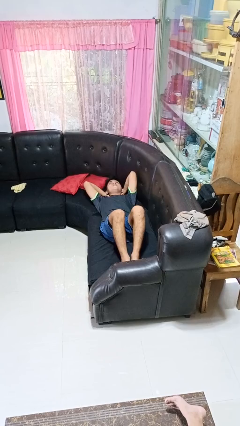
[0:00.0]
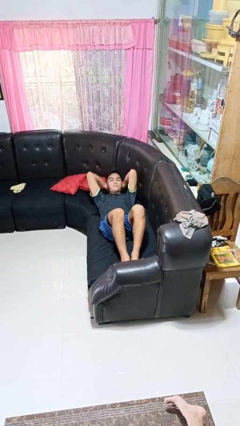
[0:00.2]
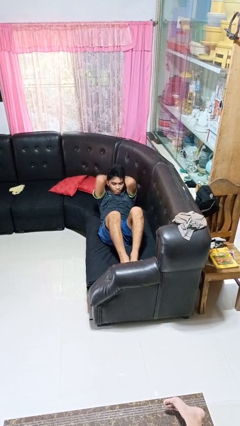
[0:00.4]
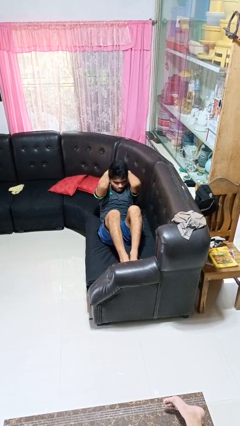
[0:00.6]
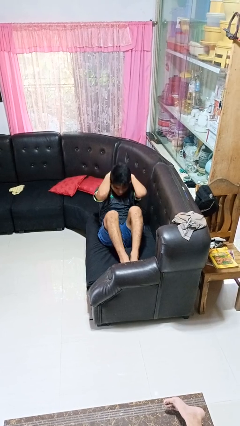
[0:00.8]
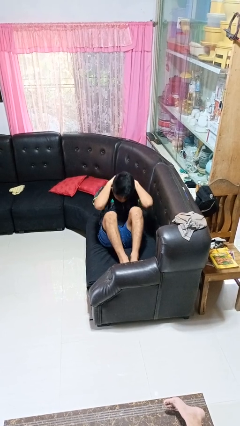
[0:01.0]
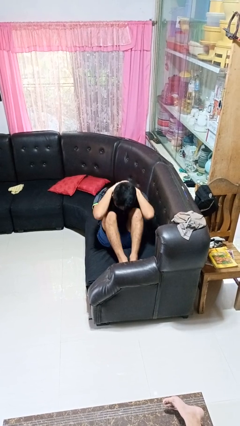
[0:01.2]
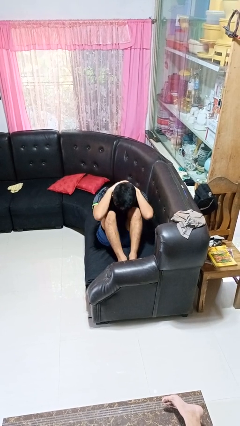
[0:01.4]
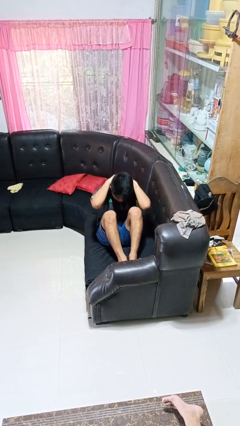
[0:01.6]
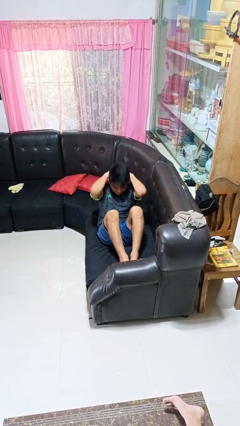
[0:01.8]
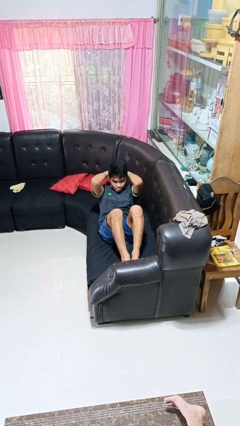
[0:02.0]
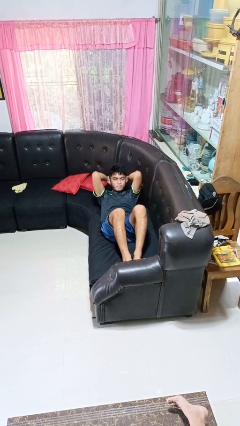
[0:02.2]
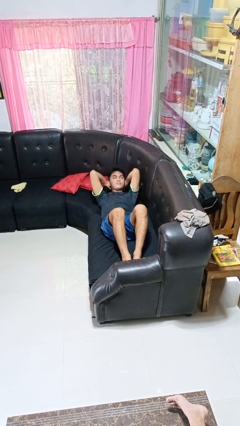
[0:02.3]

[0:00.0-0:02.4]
person exercises with situp

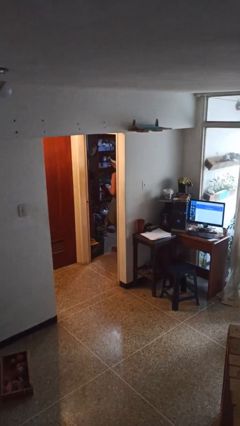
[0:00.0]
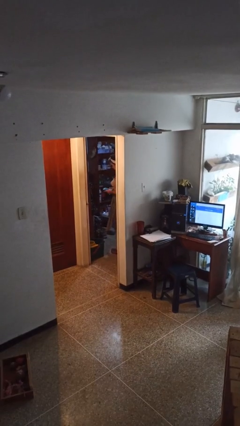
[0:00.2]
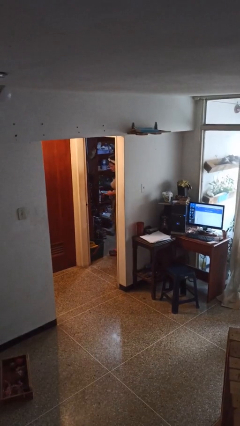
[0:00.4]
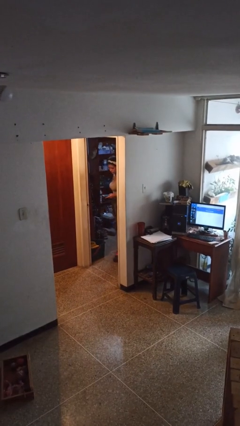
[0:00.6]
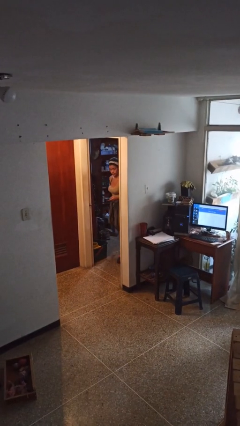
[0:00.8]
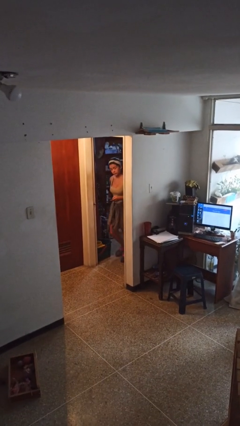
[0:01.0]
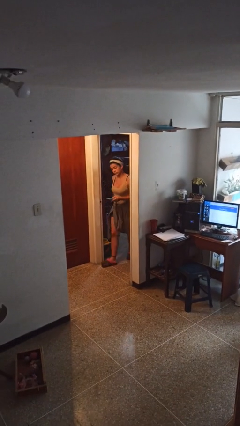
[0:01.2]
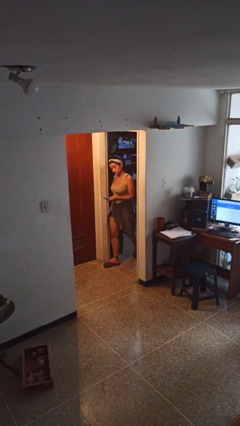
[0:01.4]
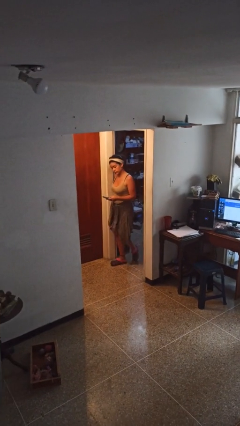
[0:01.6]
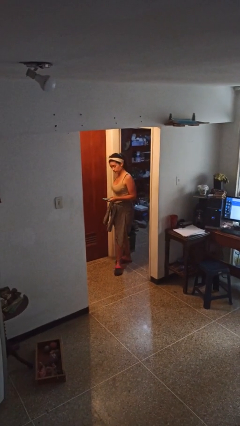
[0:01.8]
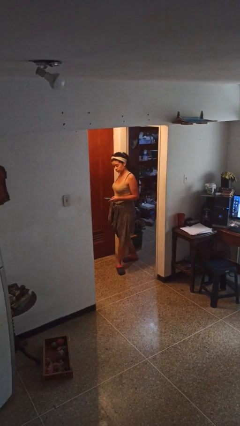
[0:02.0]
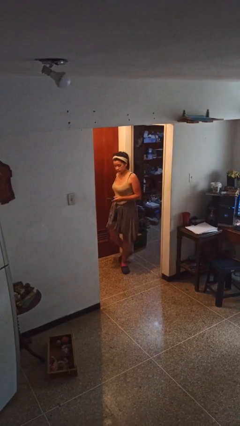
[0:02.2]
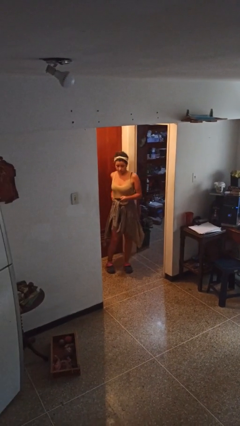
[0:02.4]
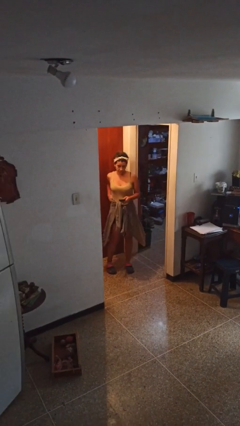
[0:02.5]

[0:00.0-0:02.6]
person enters scene through structure

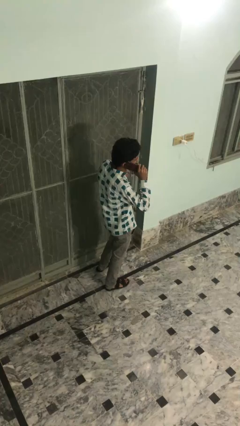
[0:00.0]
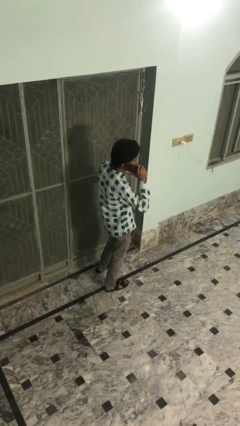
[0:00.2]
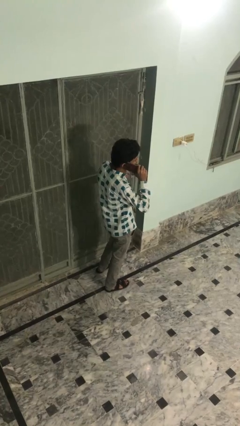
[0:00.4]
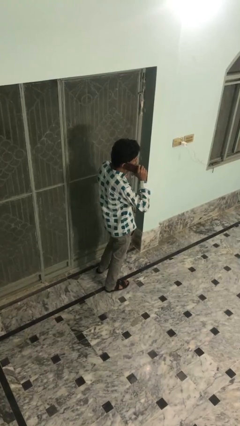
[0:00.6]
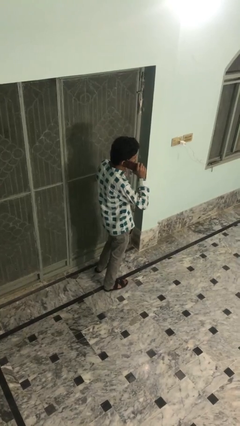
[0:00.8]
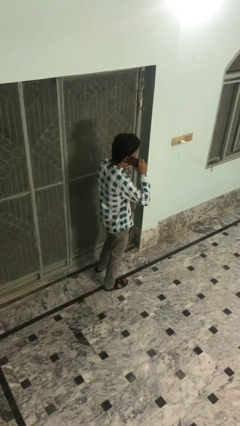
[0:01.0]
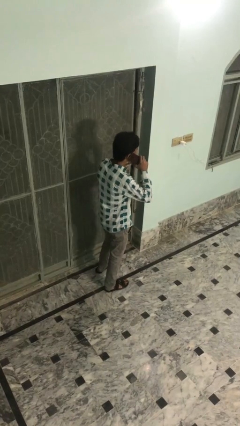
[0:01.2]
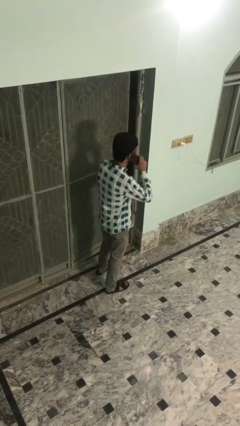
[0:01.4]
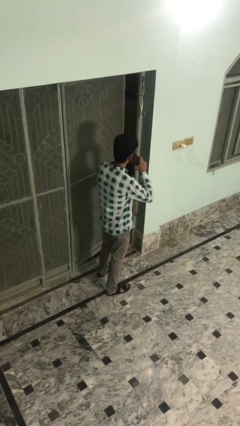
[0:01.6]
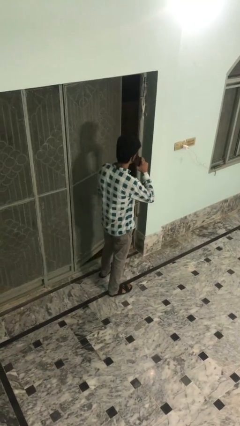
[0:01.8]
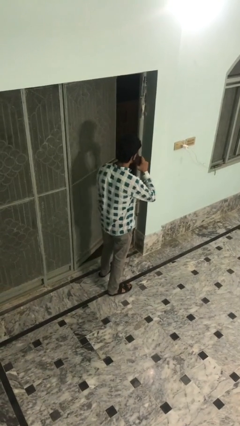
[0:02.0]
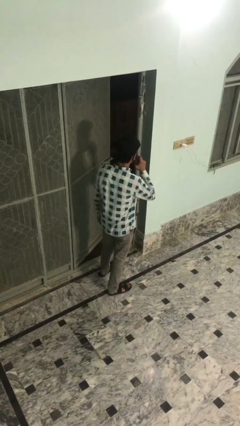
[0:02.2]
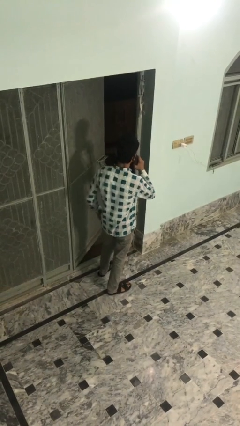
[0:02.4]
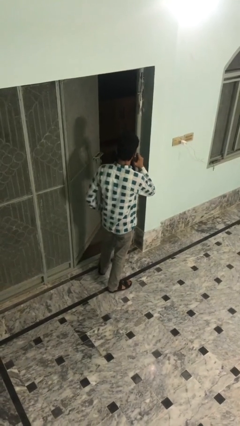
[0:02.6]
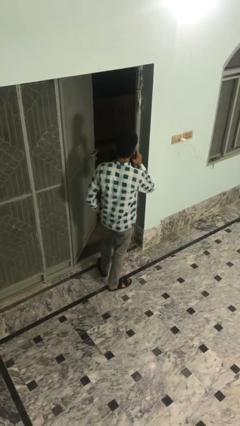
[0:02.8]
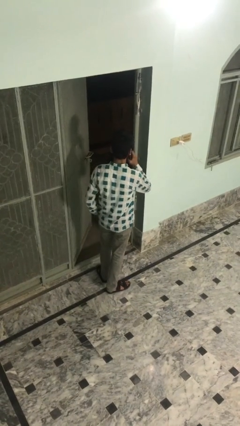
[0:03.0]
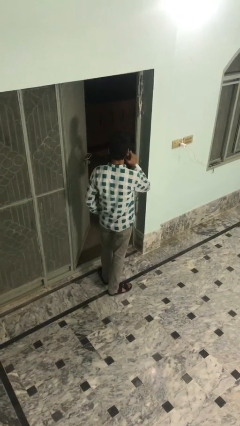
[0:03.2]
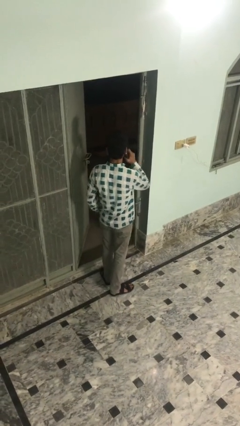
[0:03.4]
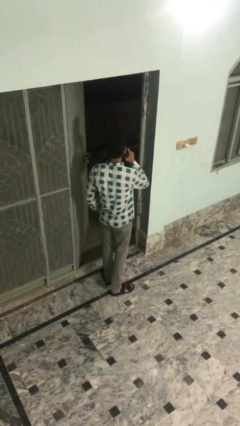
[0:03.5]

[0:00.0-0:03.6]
person opens facility door

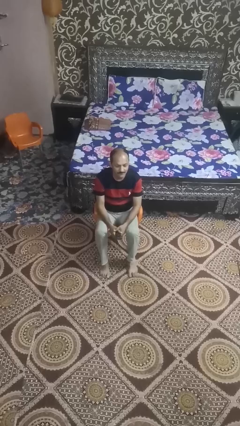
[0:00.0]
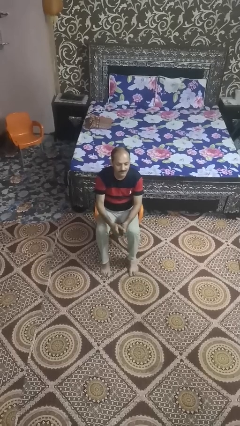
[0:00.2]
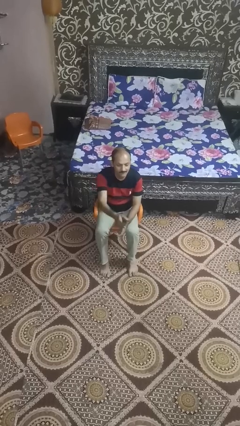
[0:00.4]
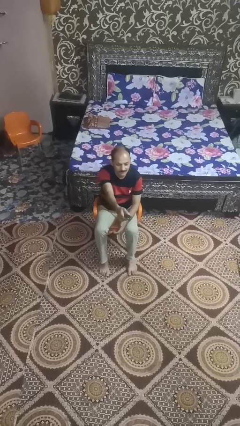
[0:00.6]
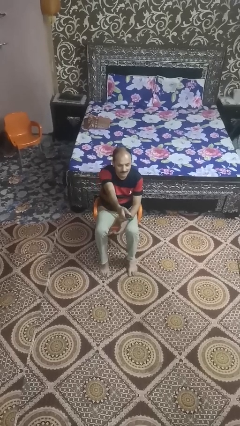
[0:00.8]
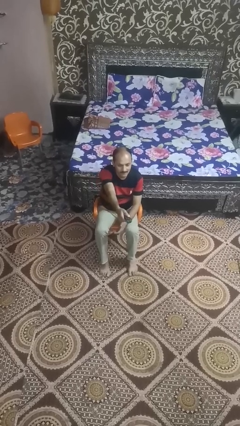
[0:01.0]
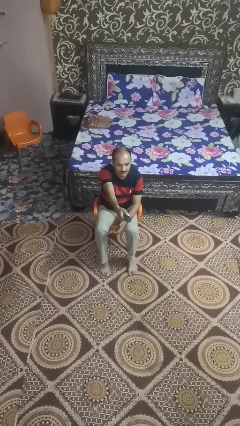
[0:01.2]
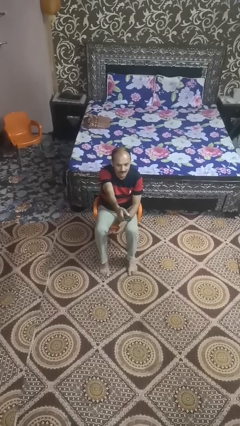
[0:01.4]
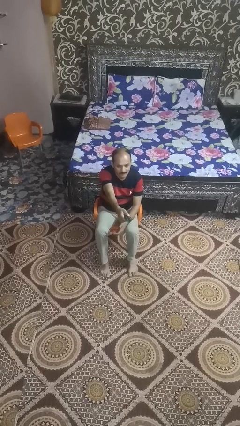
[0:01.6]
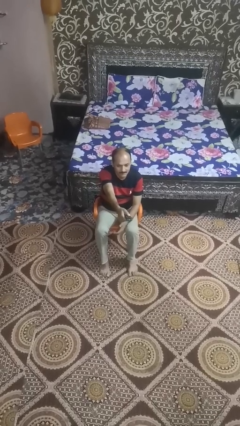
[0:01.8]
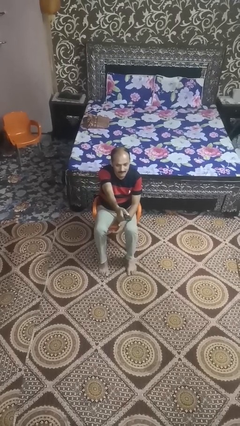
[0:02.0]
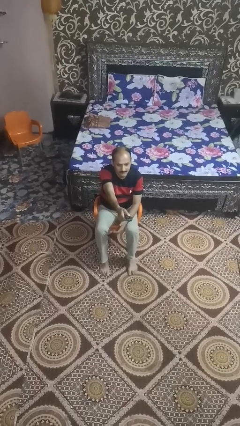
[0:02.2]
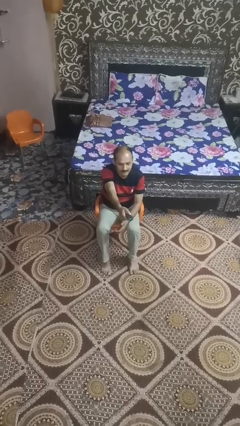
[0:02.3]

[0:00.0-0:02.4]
person uses television remote

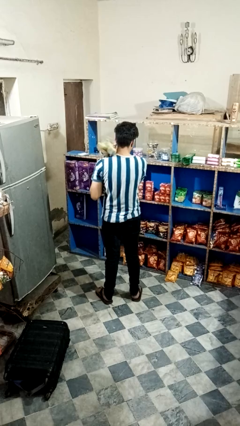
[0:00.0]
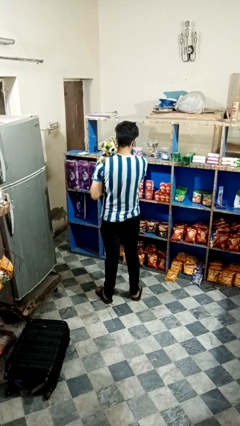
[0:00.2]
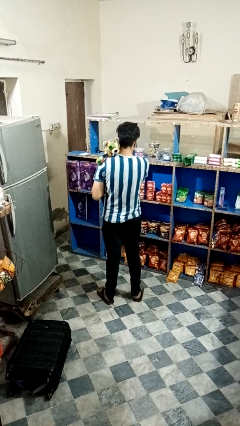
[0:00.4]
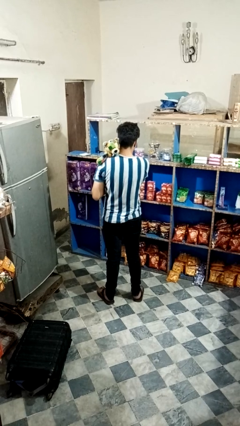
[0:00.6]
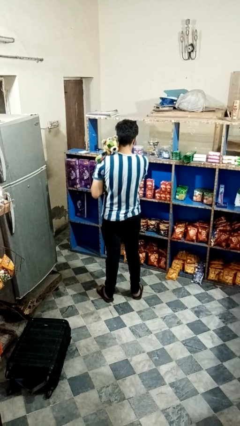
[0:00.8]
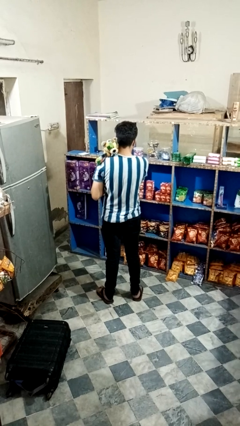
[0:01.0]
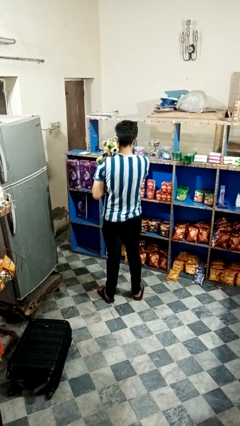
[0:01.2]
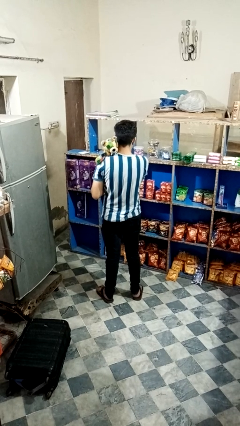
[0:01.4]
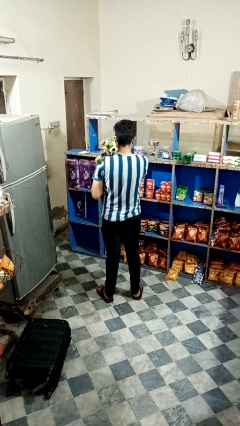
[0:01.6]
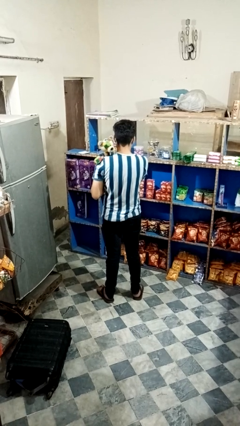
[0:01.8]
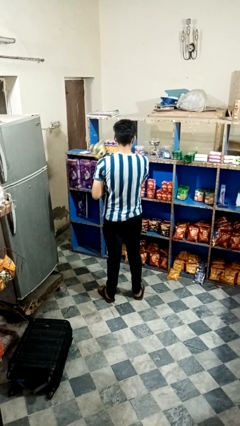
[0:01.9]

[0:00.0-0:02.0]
person hugs stuffed animal

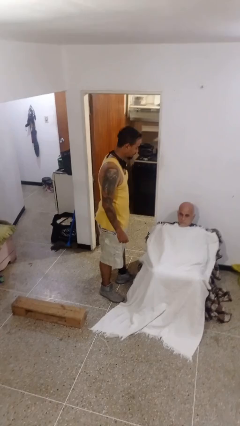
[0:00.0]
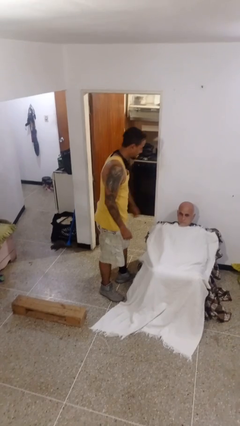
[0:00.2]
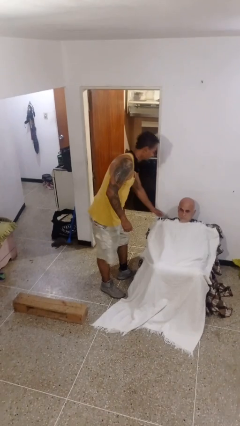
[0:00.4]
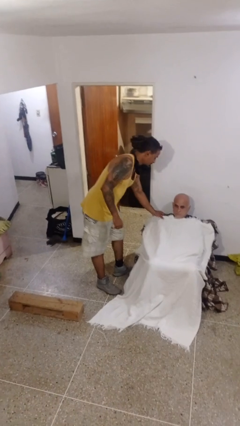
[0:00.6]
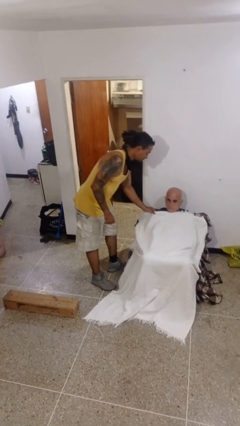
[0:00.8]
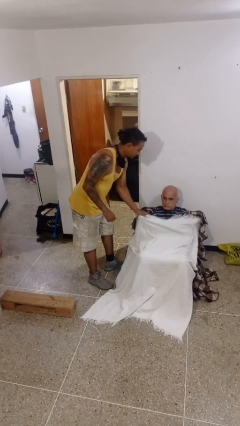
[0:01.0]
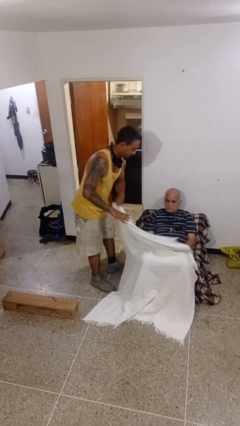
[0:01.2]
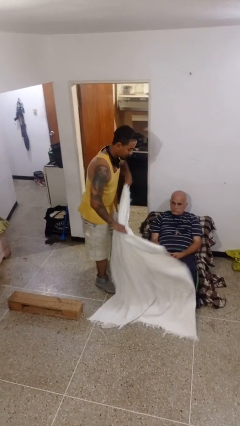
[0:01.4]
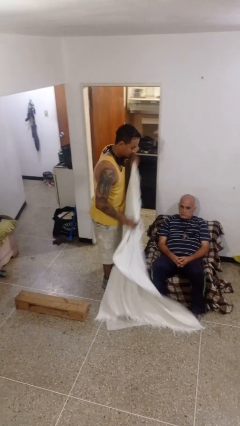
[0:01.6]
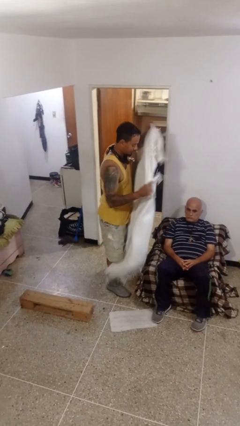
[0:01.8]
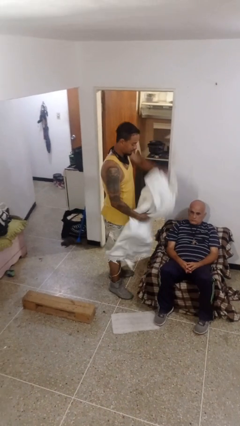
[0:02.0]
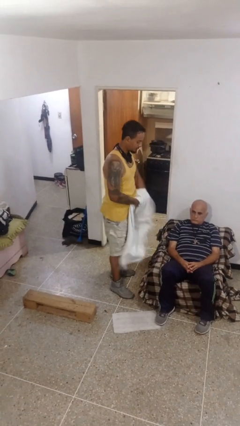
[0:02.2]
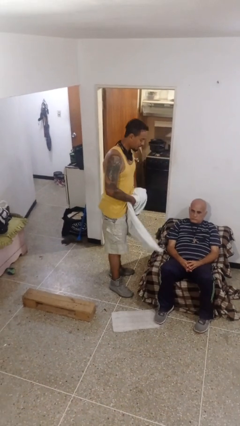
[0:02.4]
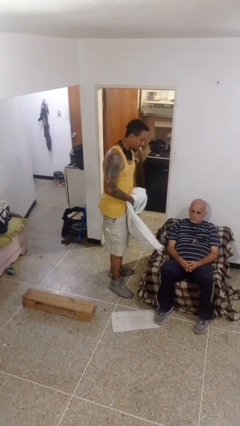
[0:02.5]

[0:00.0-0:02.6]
person uncovers friend with blanket

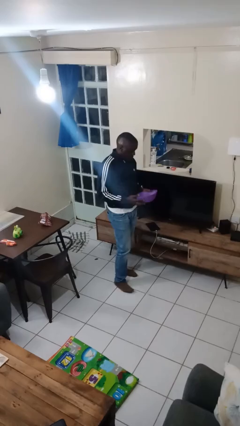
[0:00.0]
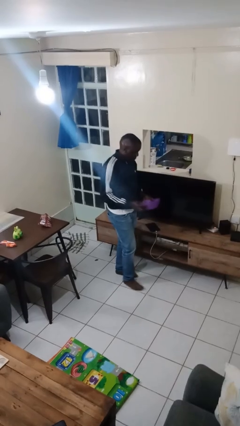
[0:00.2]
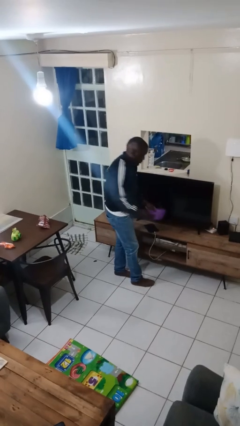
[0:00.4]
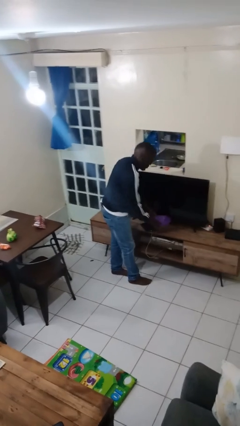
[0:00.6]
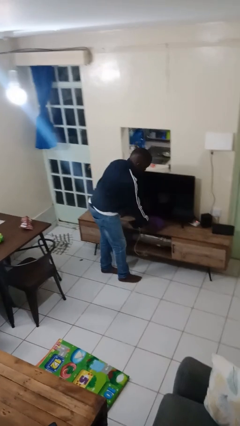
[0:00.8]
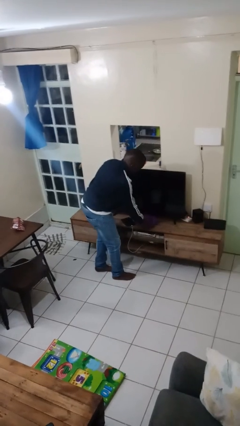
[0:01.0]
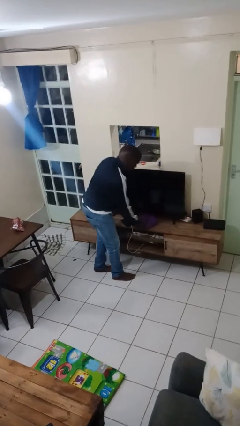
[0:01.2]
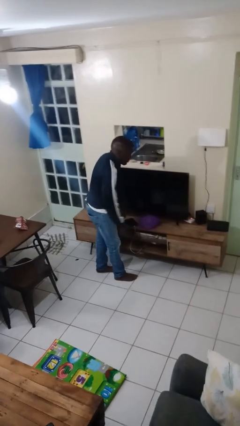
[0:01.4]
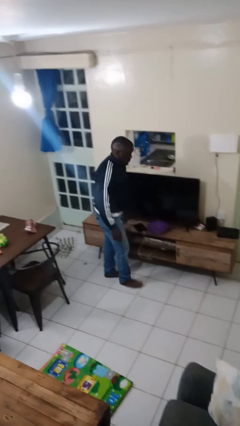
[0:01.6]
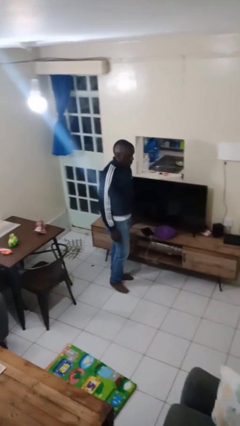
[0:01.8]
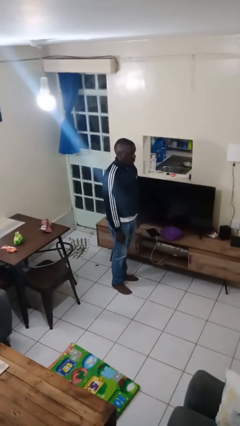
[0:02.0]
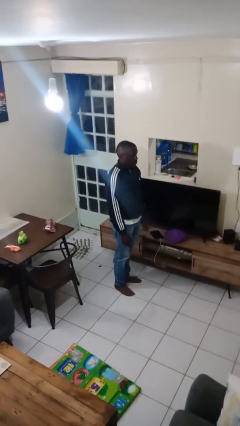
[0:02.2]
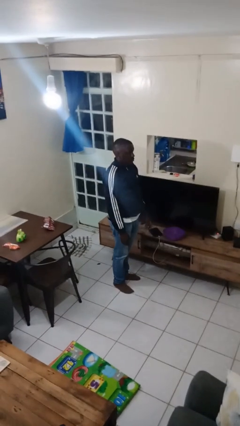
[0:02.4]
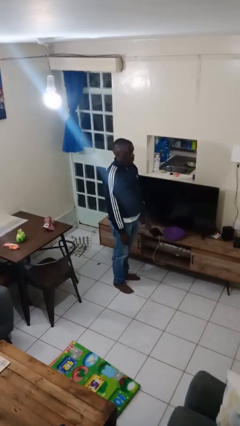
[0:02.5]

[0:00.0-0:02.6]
person puts down object on countertop
